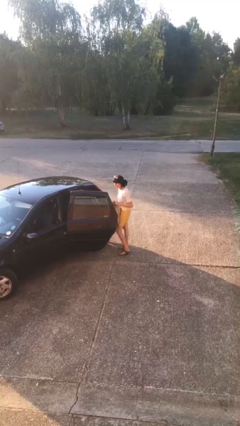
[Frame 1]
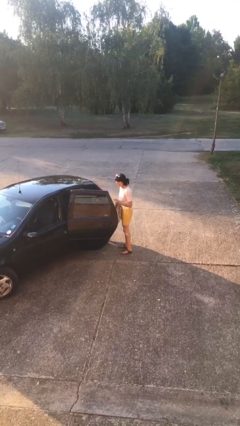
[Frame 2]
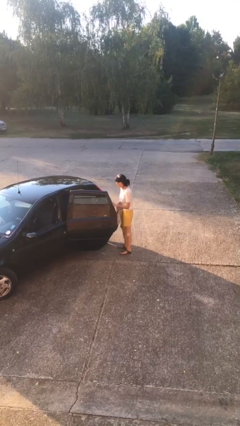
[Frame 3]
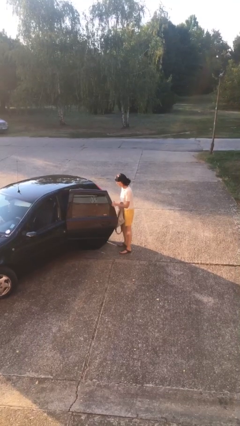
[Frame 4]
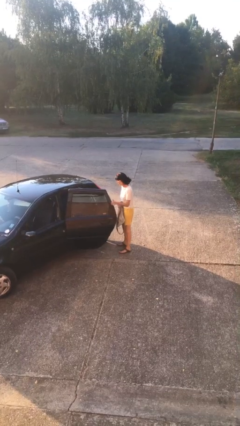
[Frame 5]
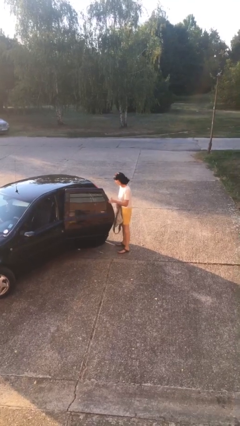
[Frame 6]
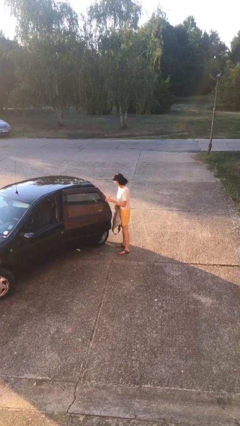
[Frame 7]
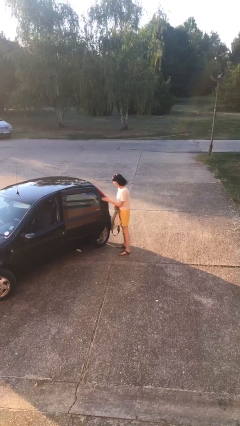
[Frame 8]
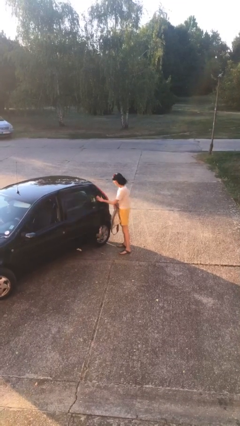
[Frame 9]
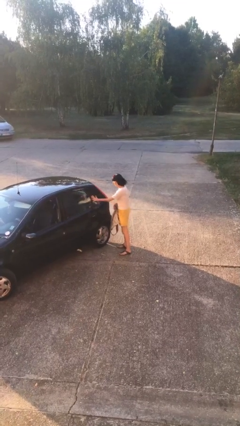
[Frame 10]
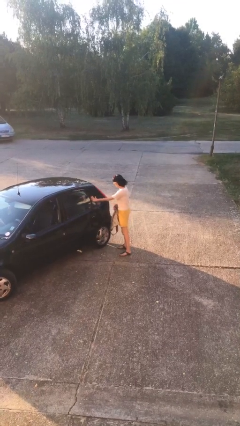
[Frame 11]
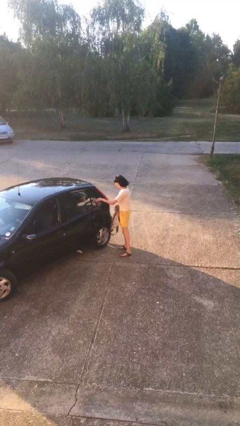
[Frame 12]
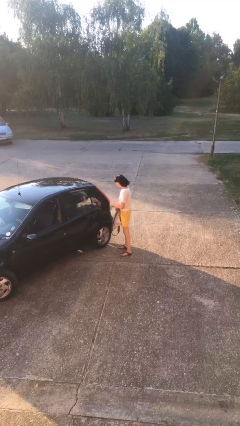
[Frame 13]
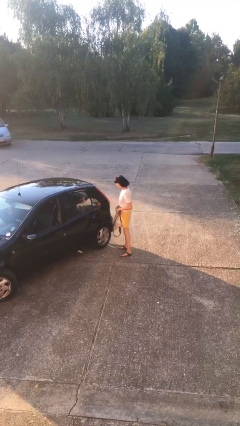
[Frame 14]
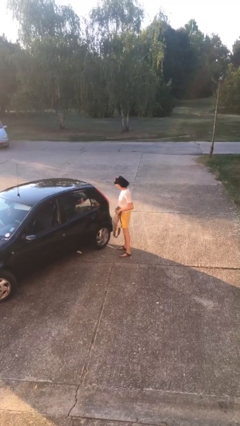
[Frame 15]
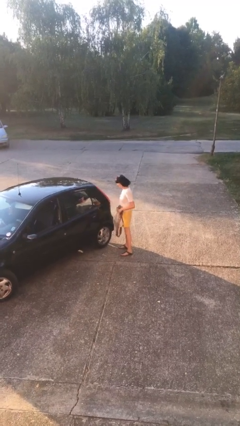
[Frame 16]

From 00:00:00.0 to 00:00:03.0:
person closes car door

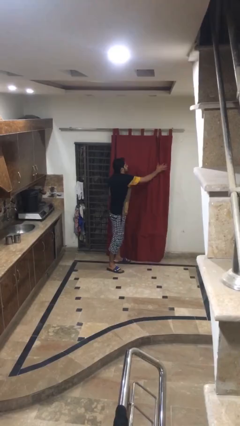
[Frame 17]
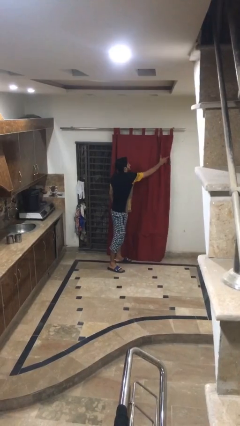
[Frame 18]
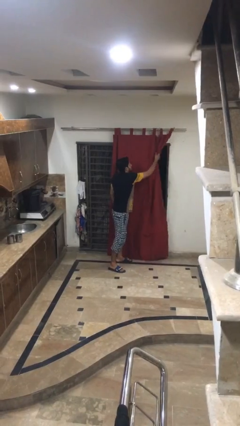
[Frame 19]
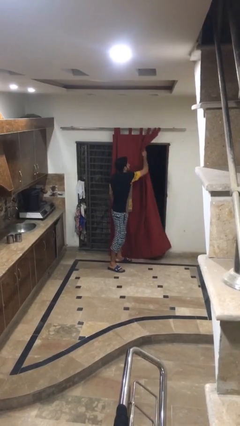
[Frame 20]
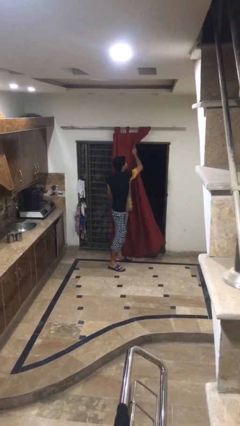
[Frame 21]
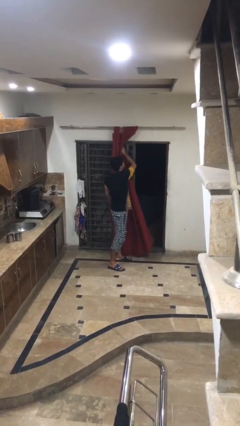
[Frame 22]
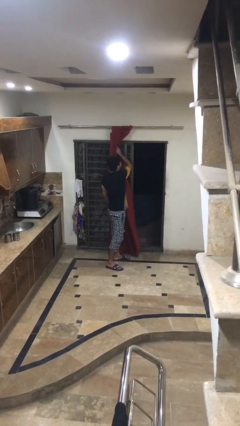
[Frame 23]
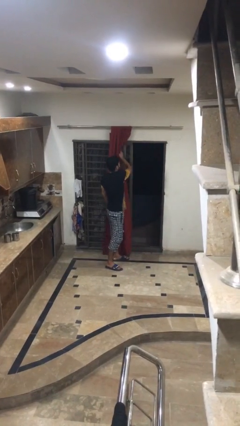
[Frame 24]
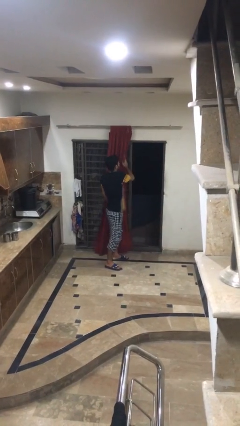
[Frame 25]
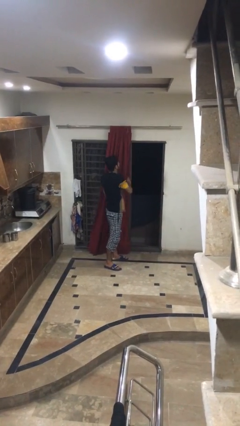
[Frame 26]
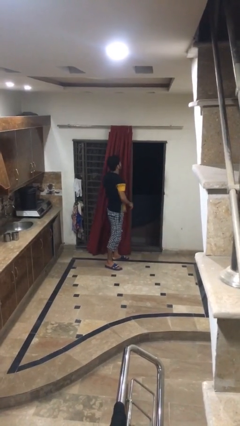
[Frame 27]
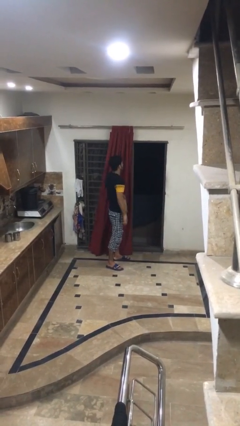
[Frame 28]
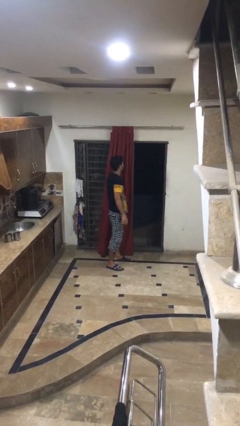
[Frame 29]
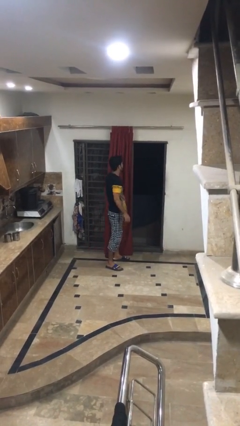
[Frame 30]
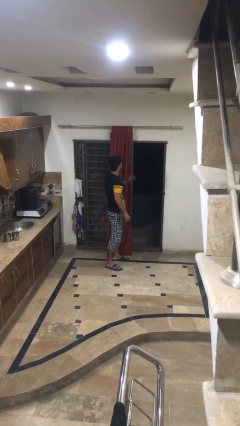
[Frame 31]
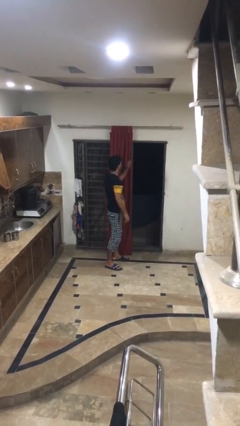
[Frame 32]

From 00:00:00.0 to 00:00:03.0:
person opens curtains

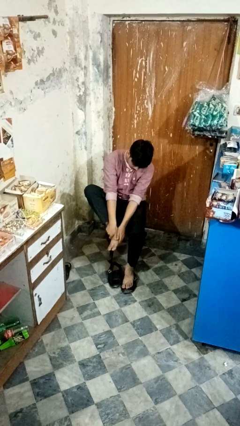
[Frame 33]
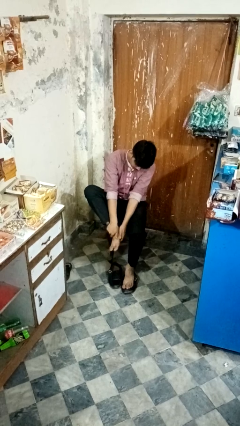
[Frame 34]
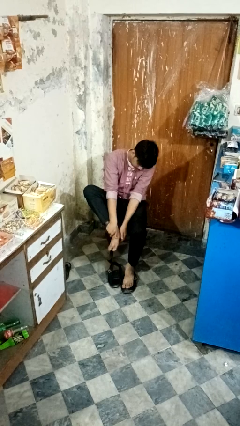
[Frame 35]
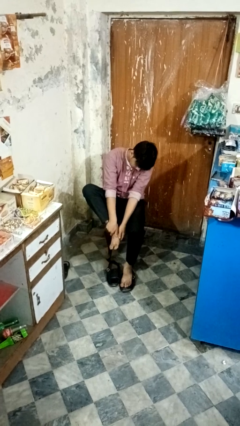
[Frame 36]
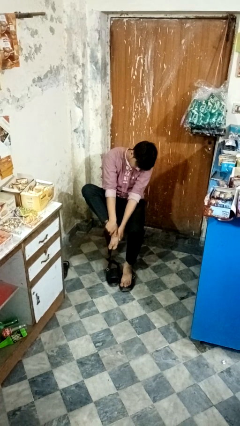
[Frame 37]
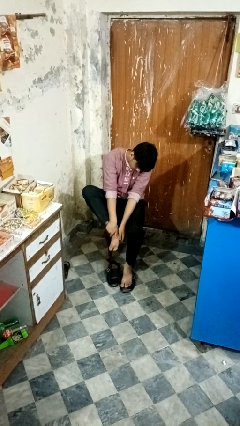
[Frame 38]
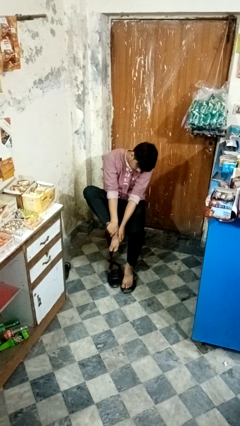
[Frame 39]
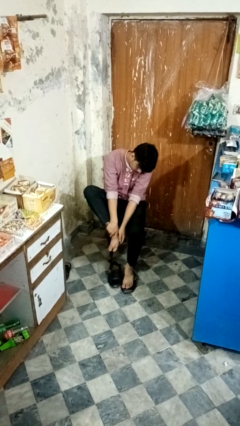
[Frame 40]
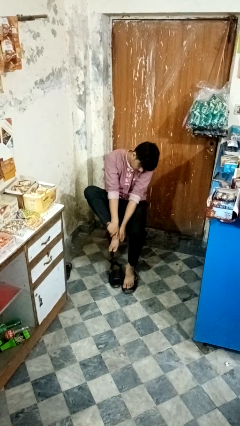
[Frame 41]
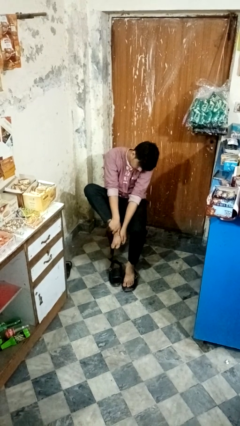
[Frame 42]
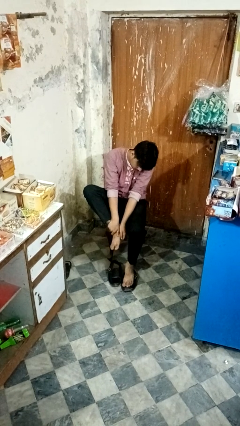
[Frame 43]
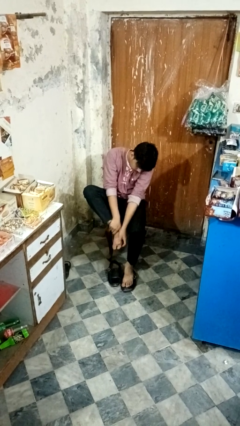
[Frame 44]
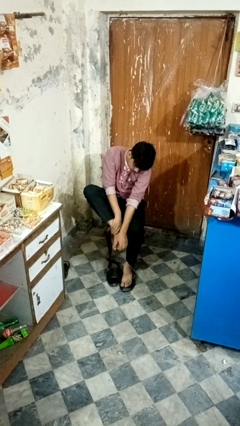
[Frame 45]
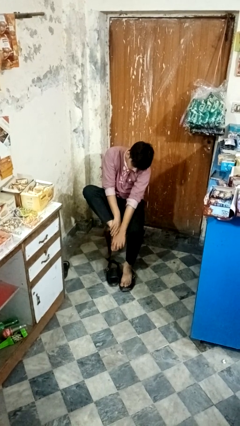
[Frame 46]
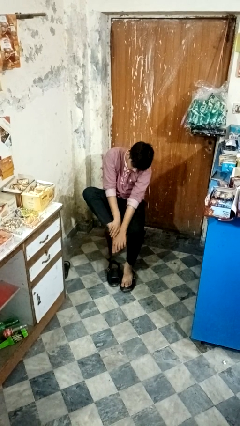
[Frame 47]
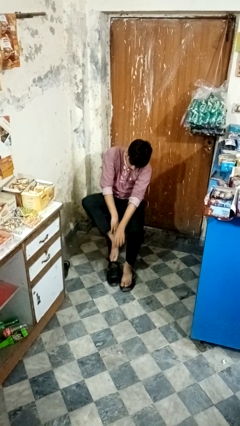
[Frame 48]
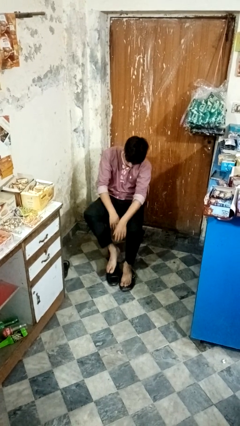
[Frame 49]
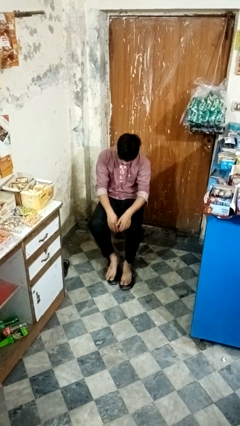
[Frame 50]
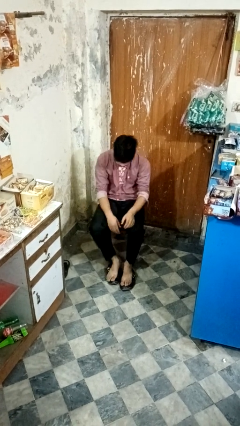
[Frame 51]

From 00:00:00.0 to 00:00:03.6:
person rubs foot

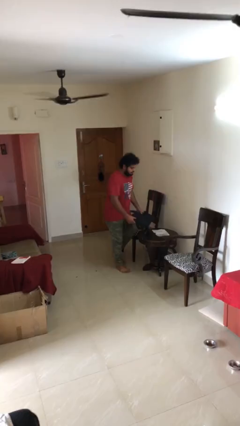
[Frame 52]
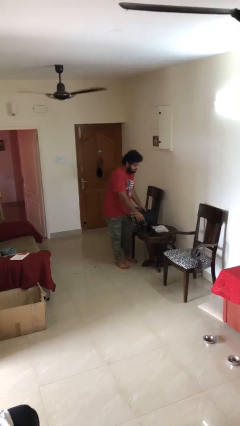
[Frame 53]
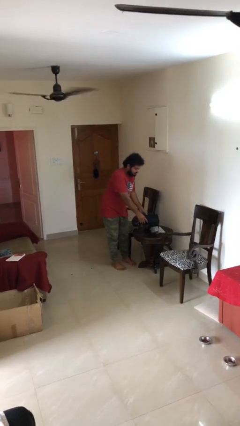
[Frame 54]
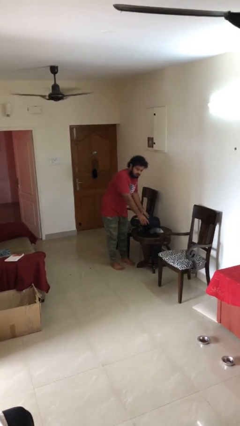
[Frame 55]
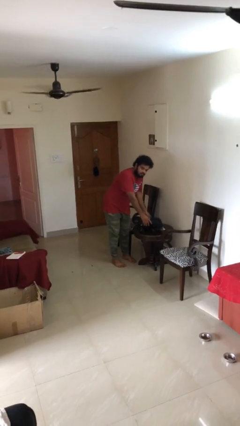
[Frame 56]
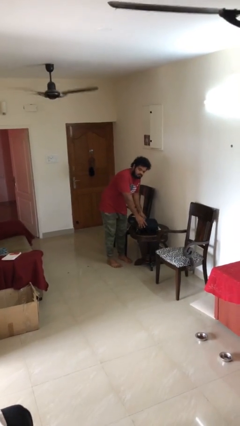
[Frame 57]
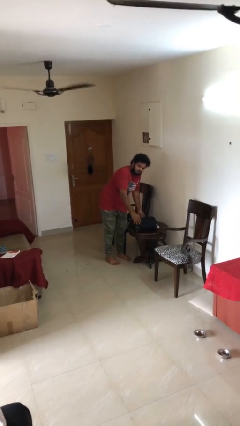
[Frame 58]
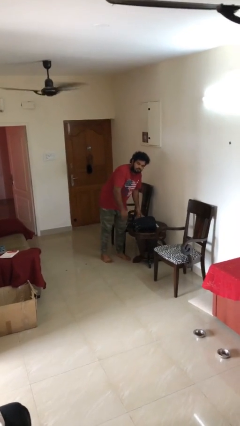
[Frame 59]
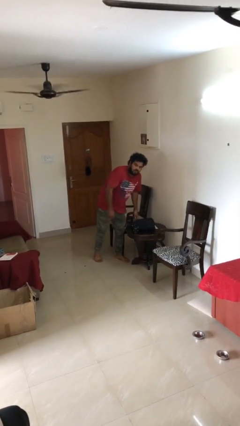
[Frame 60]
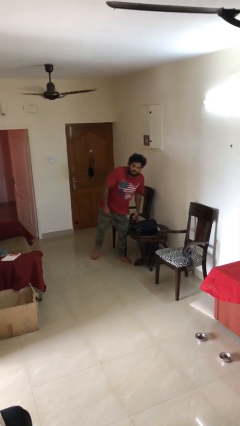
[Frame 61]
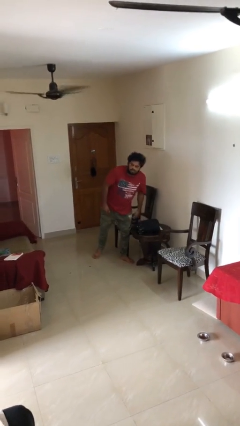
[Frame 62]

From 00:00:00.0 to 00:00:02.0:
person puts down object on table

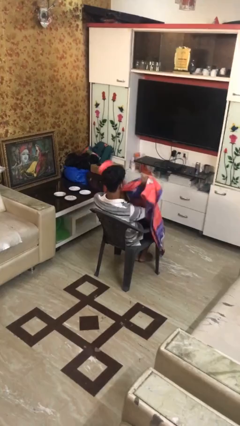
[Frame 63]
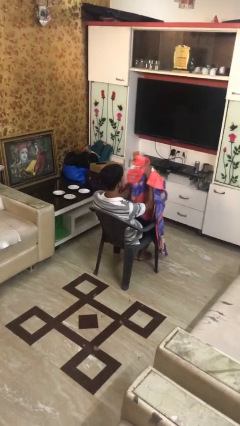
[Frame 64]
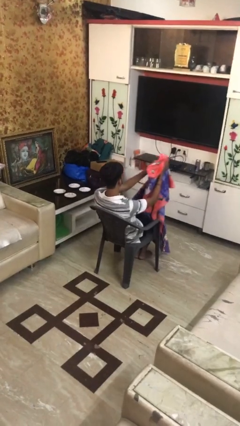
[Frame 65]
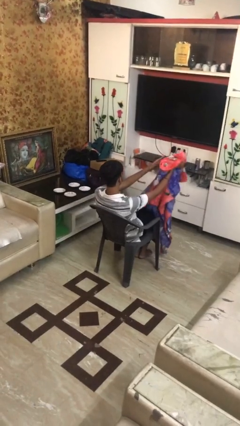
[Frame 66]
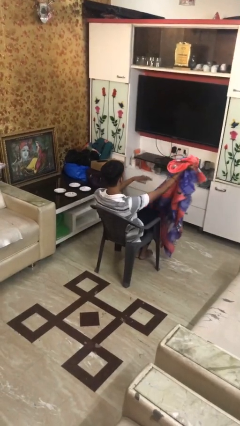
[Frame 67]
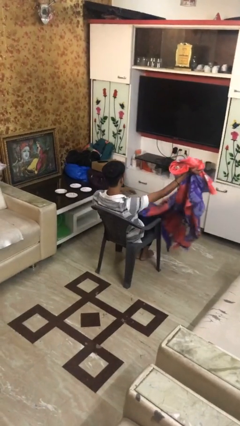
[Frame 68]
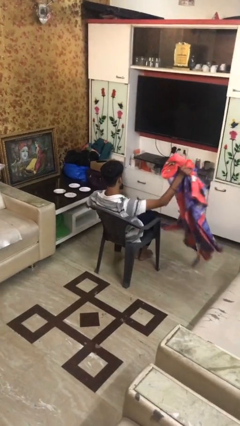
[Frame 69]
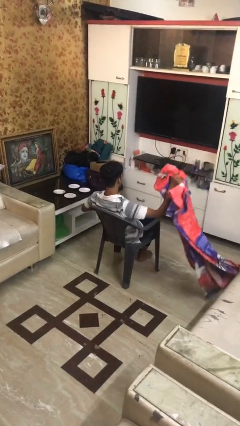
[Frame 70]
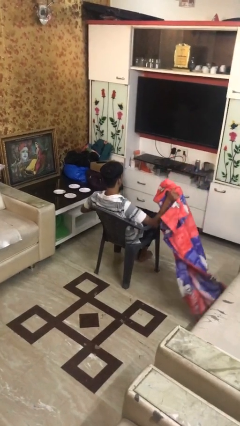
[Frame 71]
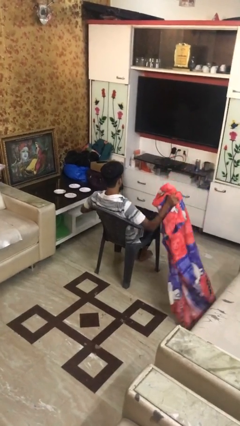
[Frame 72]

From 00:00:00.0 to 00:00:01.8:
person uncovers with blanket

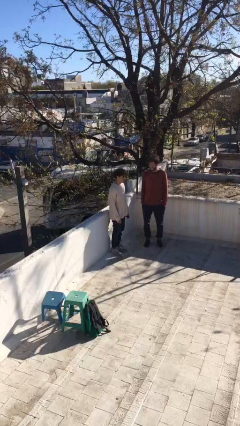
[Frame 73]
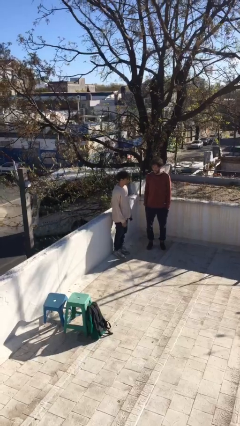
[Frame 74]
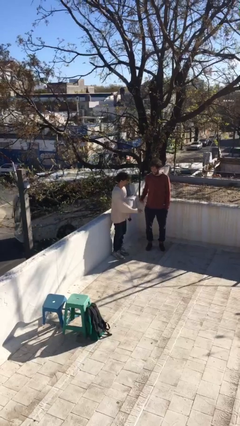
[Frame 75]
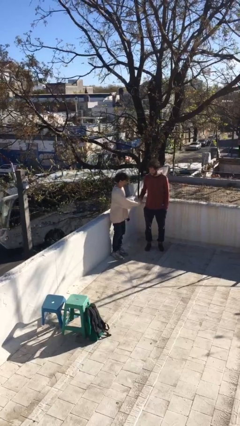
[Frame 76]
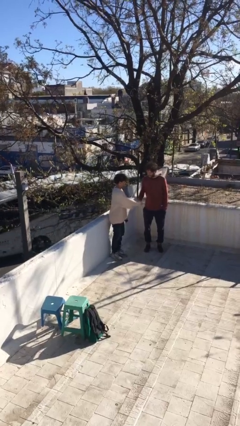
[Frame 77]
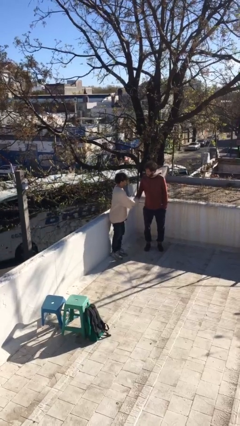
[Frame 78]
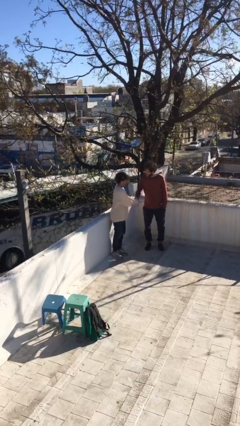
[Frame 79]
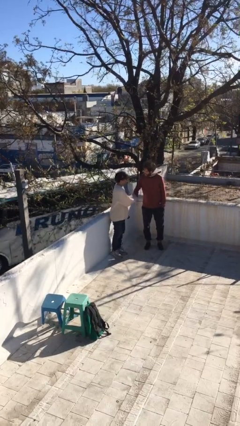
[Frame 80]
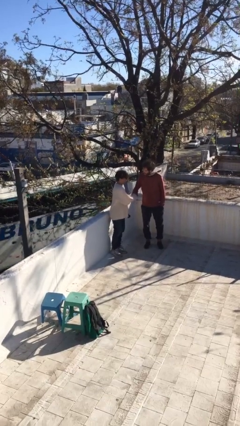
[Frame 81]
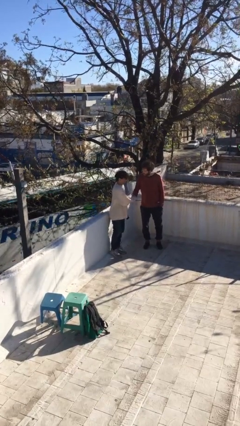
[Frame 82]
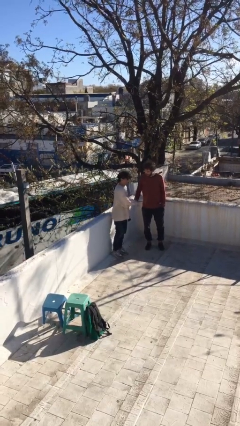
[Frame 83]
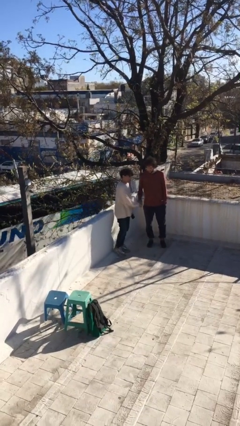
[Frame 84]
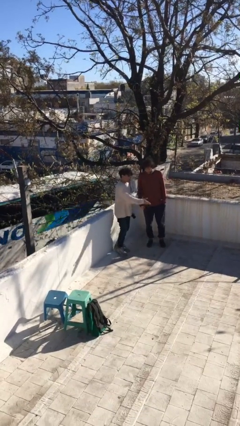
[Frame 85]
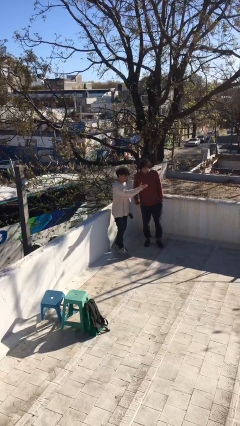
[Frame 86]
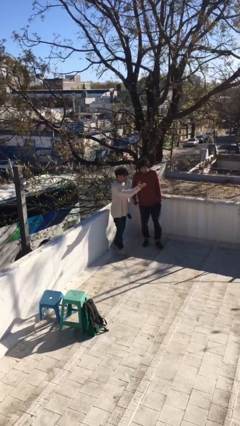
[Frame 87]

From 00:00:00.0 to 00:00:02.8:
person shakes hand

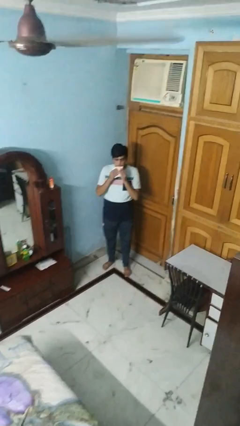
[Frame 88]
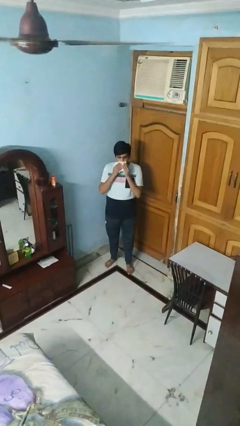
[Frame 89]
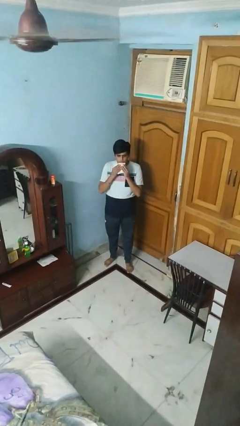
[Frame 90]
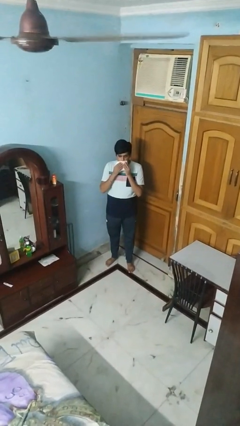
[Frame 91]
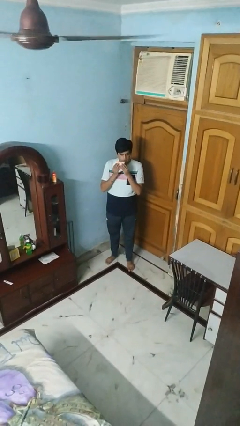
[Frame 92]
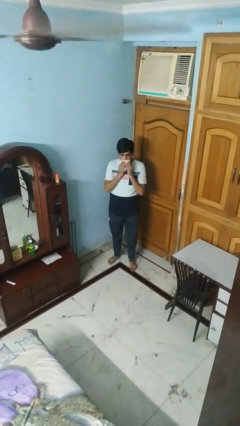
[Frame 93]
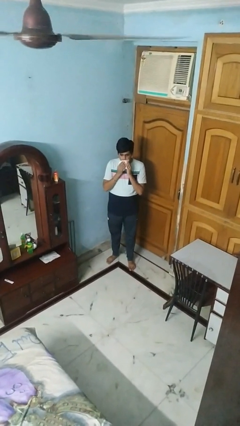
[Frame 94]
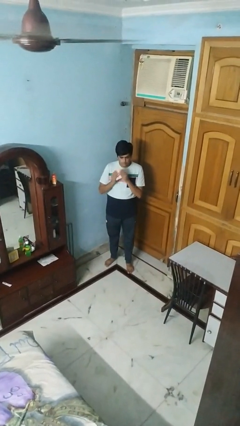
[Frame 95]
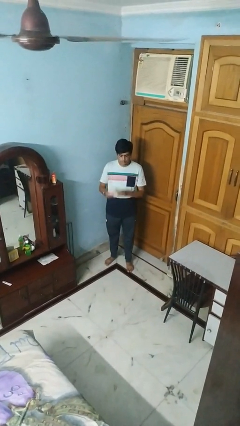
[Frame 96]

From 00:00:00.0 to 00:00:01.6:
person wipes mouth with napkin
